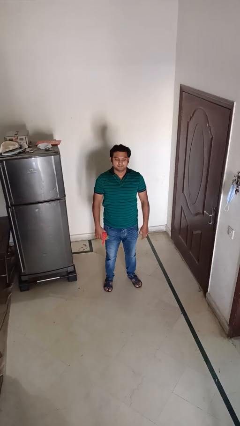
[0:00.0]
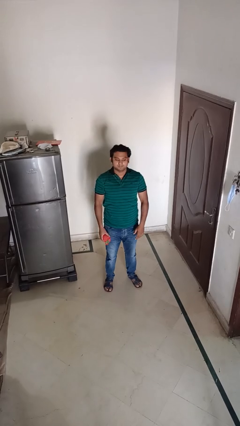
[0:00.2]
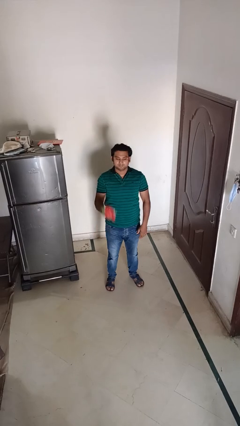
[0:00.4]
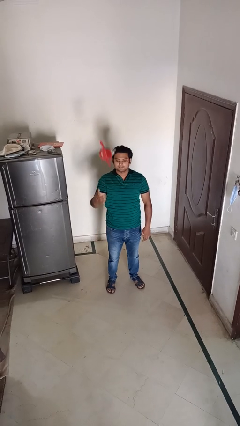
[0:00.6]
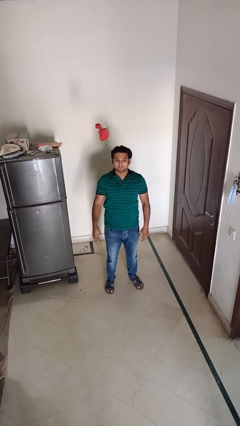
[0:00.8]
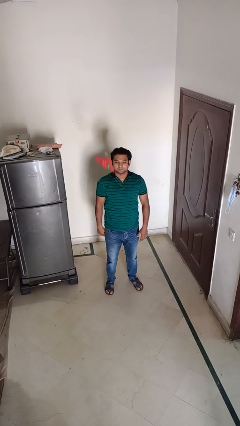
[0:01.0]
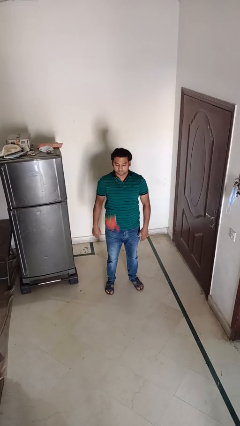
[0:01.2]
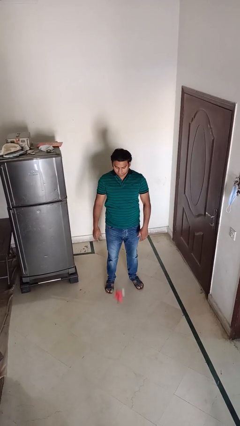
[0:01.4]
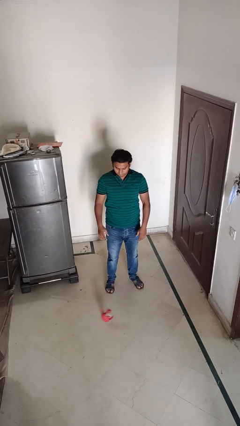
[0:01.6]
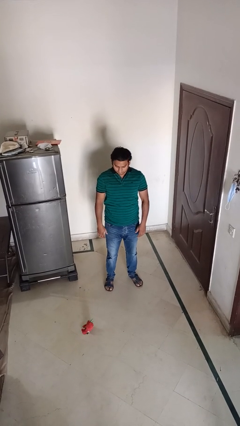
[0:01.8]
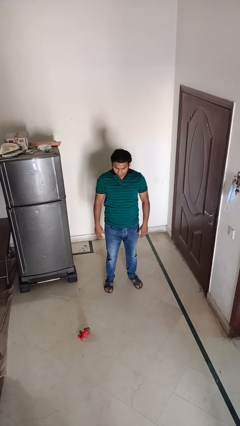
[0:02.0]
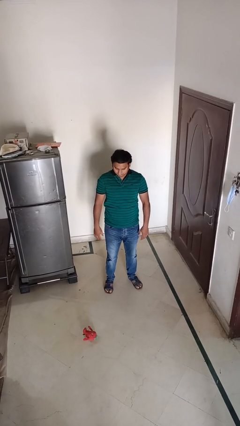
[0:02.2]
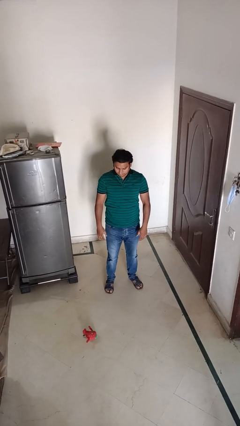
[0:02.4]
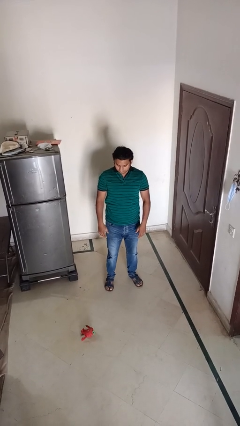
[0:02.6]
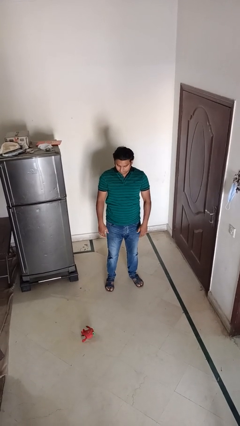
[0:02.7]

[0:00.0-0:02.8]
person throws object into air

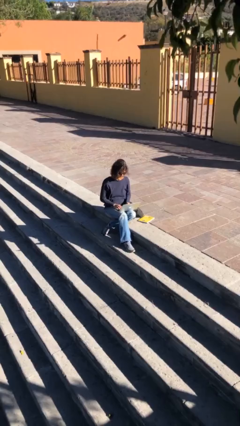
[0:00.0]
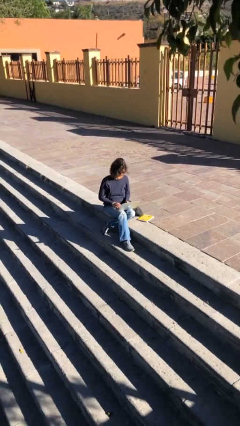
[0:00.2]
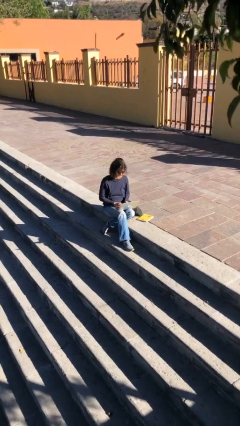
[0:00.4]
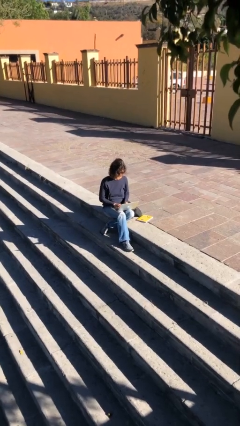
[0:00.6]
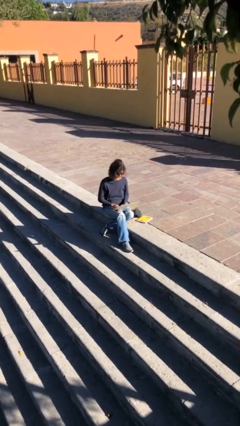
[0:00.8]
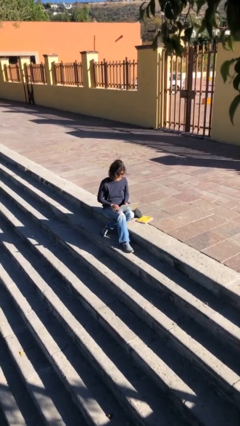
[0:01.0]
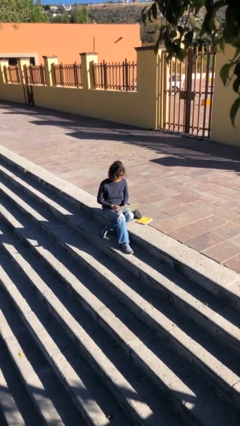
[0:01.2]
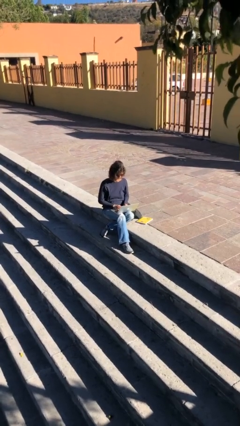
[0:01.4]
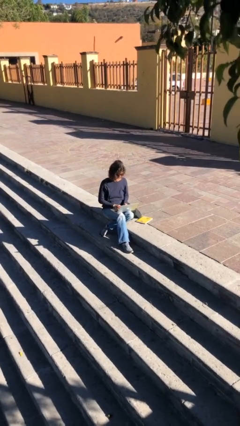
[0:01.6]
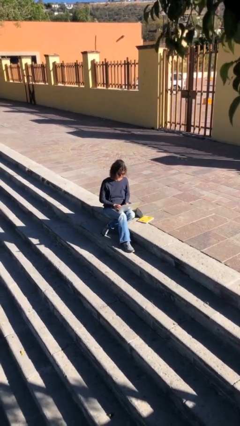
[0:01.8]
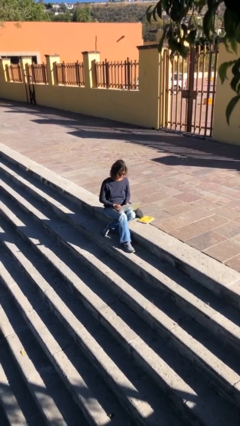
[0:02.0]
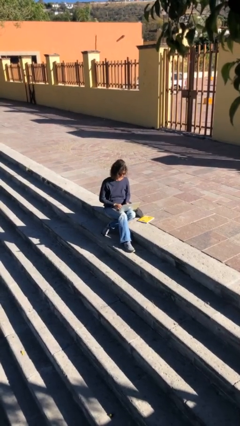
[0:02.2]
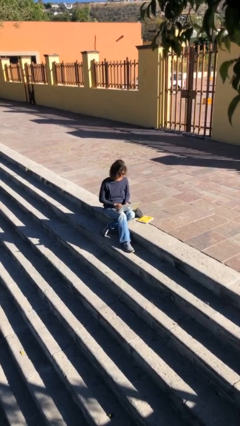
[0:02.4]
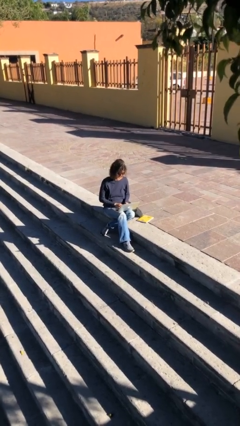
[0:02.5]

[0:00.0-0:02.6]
person interacts with laptop

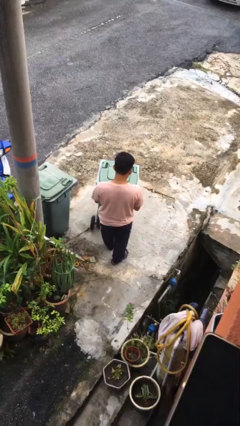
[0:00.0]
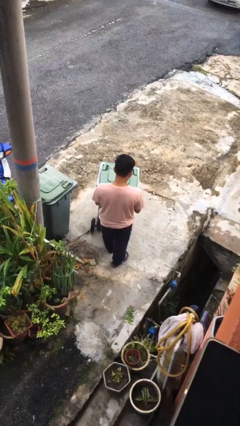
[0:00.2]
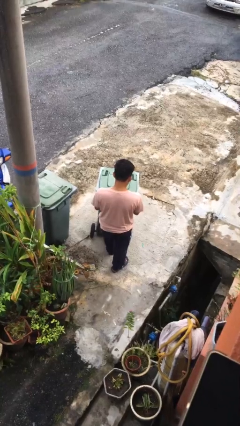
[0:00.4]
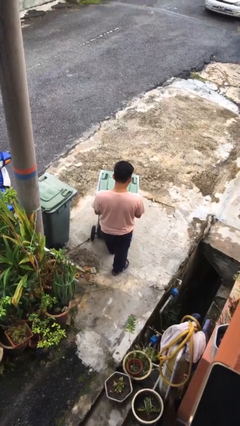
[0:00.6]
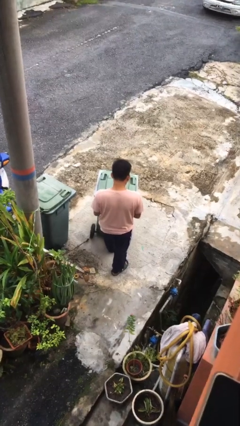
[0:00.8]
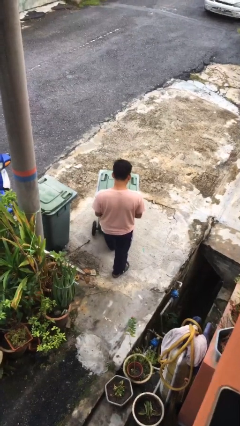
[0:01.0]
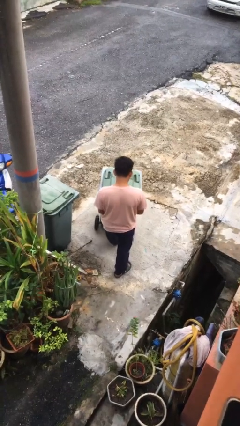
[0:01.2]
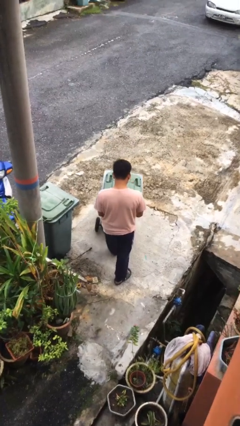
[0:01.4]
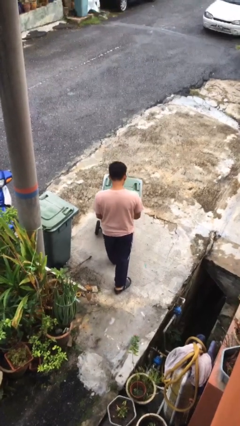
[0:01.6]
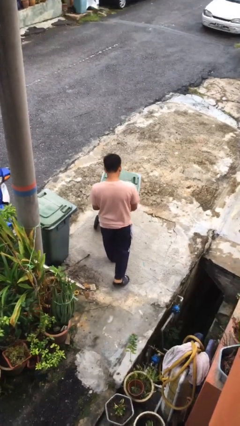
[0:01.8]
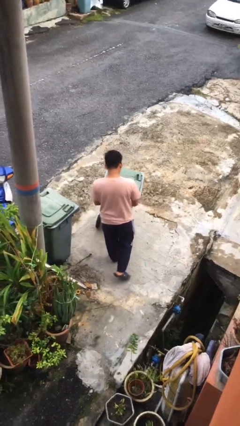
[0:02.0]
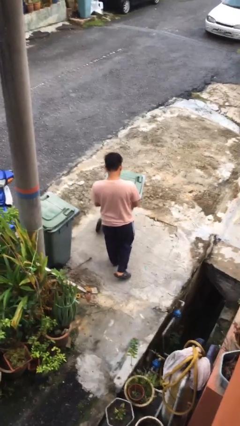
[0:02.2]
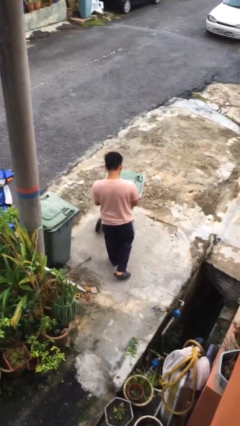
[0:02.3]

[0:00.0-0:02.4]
person pushes wheeled trashcan

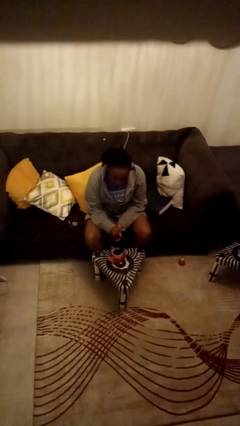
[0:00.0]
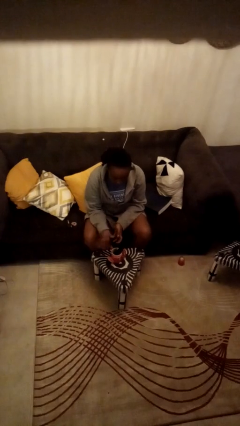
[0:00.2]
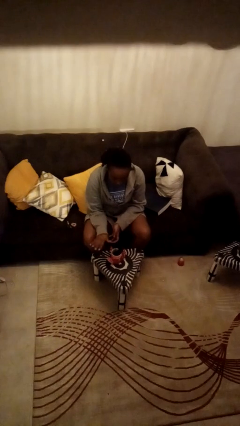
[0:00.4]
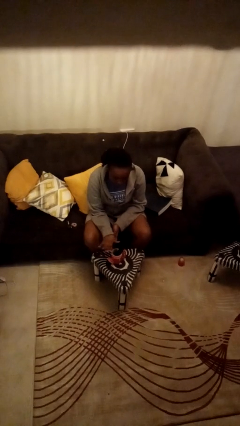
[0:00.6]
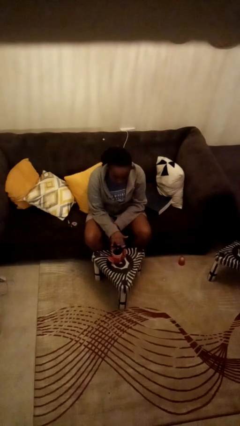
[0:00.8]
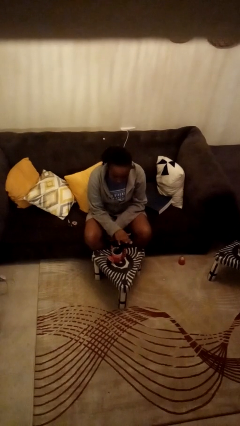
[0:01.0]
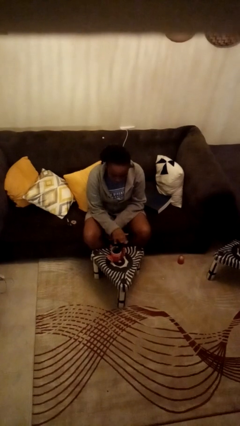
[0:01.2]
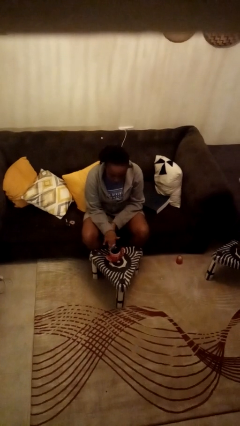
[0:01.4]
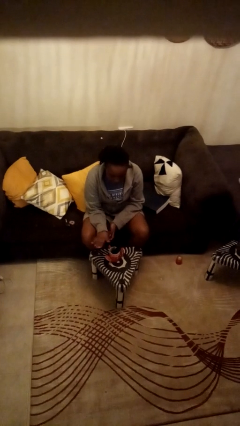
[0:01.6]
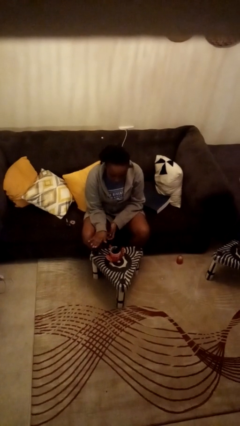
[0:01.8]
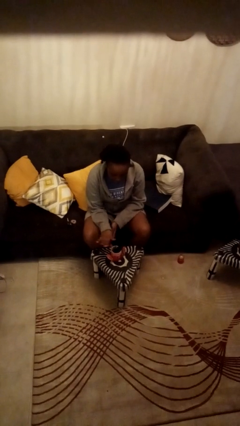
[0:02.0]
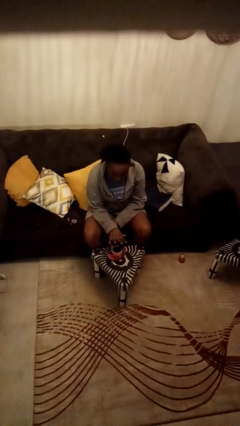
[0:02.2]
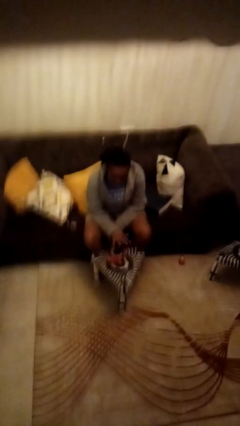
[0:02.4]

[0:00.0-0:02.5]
person waves hand over object

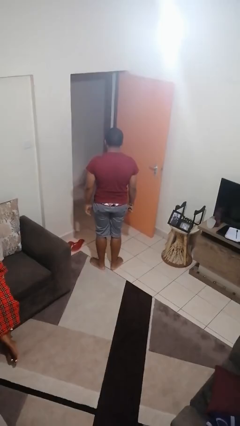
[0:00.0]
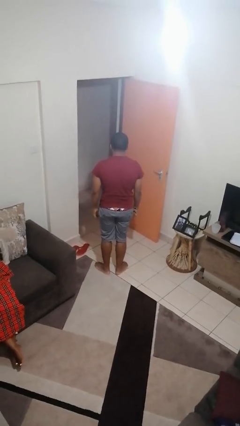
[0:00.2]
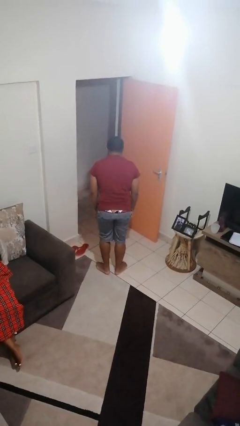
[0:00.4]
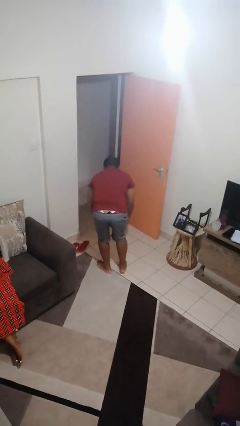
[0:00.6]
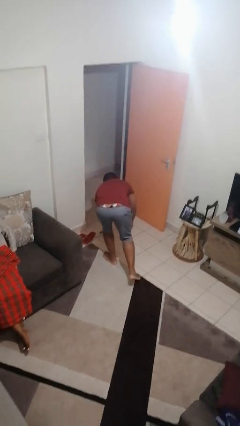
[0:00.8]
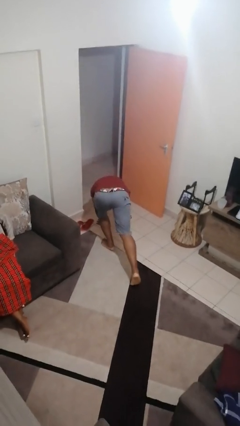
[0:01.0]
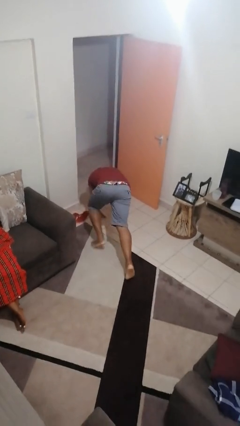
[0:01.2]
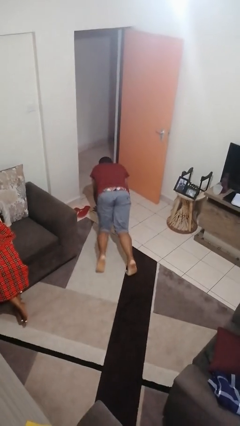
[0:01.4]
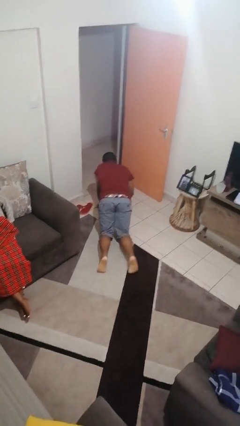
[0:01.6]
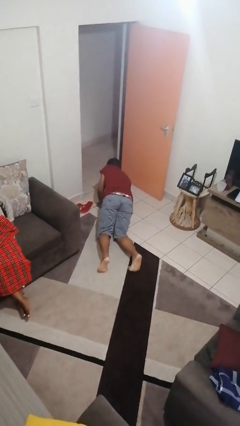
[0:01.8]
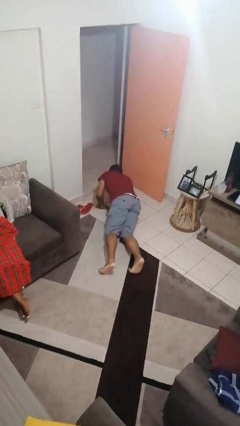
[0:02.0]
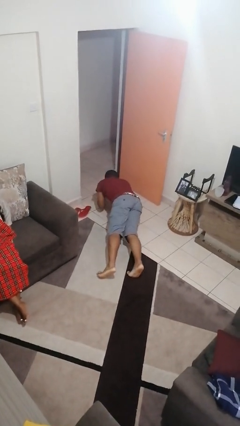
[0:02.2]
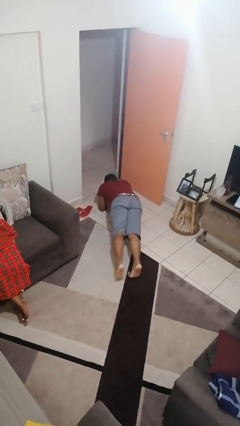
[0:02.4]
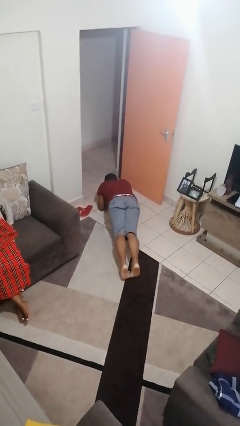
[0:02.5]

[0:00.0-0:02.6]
person exercises with plank

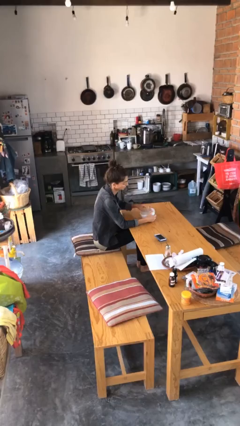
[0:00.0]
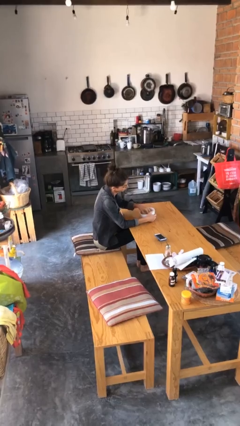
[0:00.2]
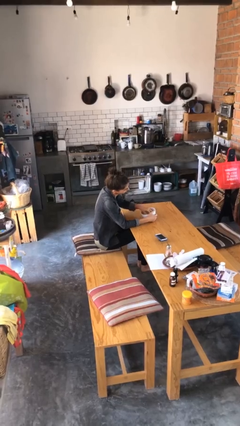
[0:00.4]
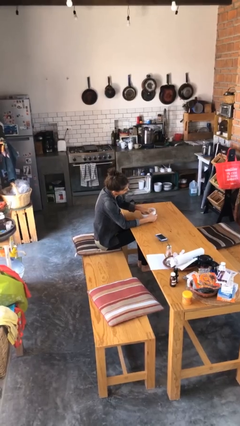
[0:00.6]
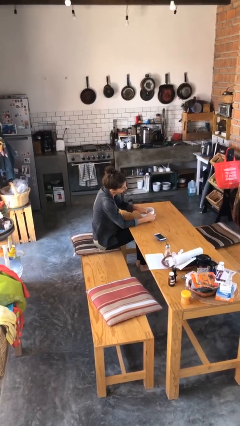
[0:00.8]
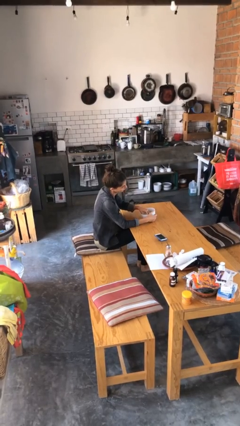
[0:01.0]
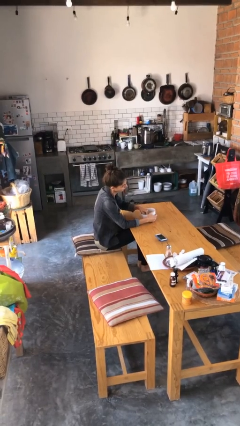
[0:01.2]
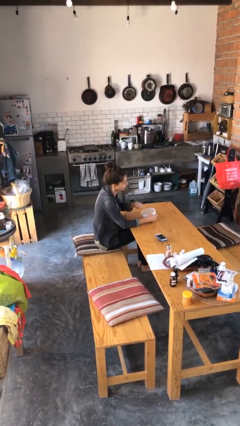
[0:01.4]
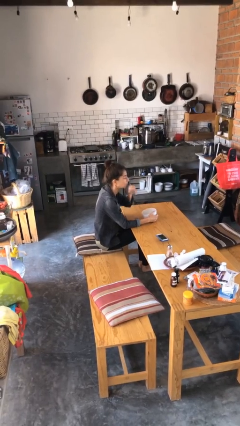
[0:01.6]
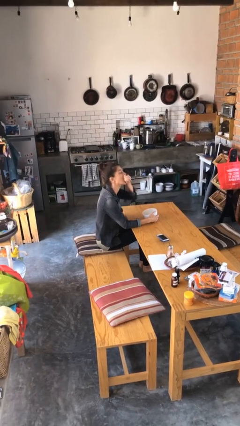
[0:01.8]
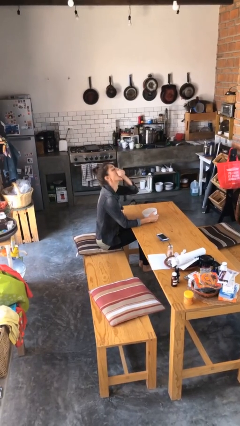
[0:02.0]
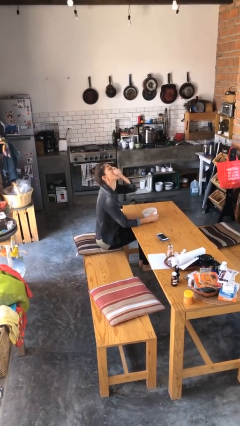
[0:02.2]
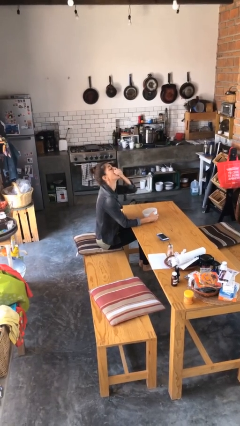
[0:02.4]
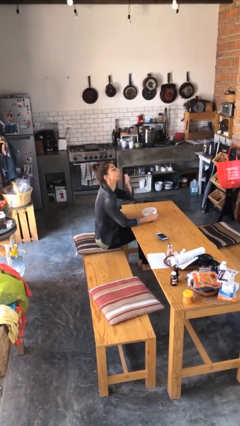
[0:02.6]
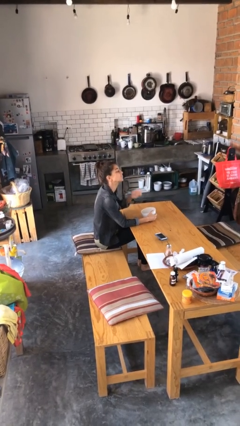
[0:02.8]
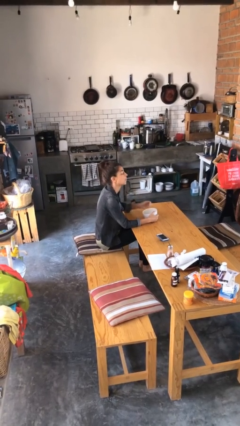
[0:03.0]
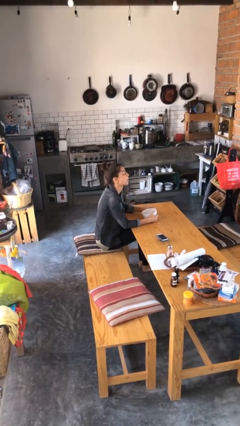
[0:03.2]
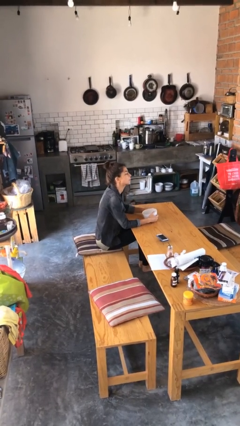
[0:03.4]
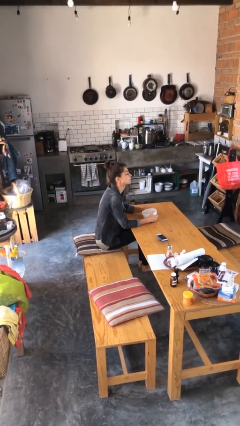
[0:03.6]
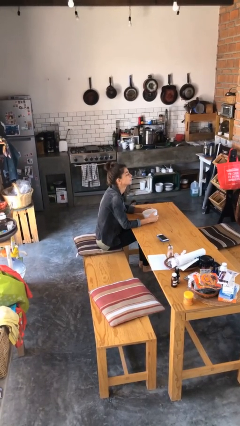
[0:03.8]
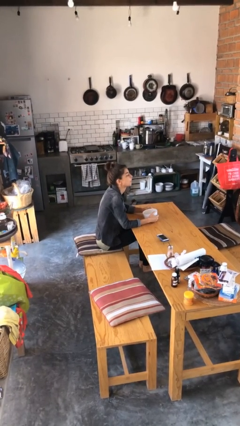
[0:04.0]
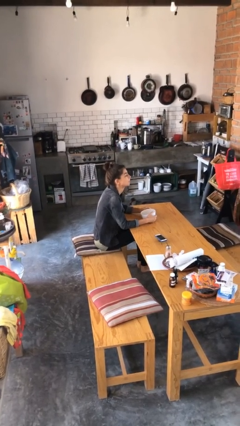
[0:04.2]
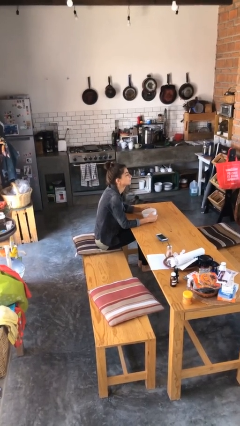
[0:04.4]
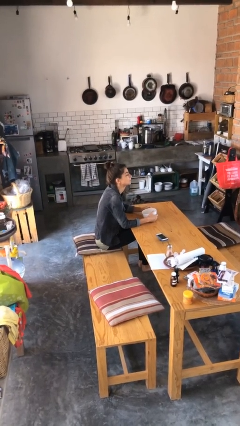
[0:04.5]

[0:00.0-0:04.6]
person eats with hands
